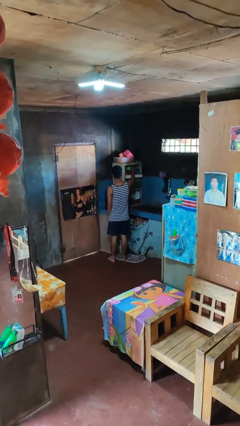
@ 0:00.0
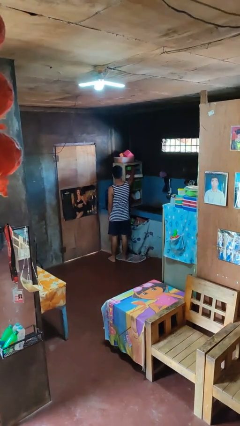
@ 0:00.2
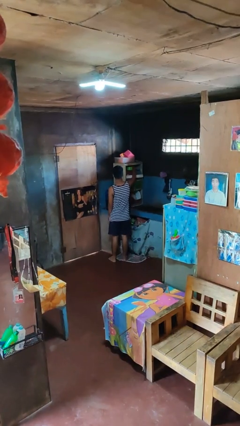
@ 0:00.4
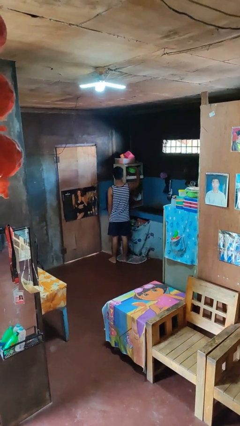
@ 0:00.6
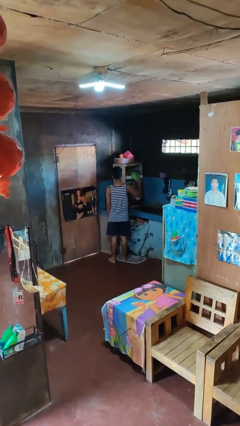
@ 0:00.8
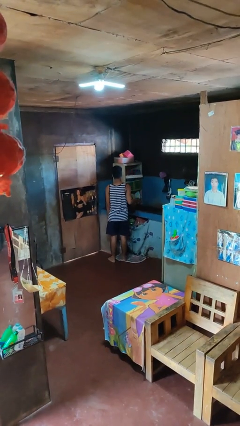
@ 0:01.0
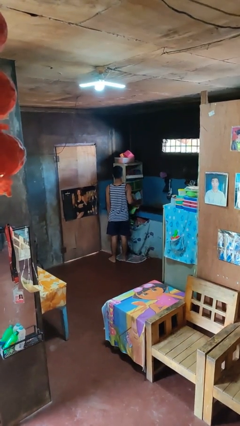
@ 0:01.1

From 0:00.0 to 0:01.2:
person takes object from cabinet

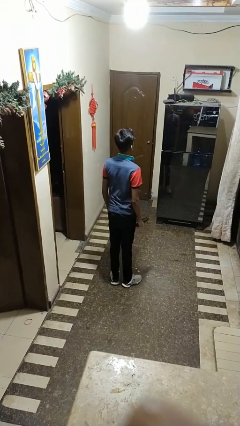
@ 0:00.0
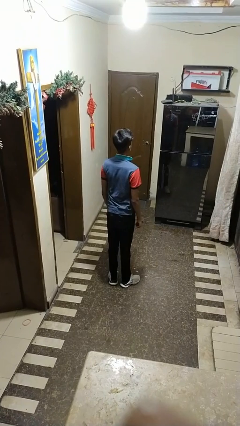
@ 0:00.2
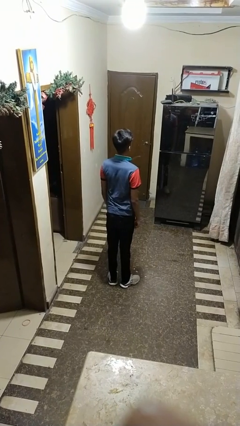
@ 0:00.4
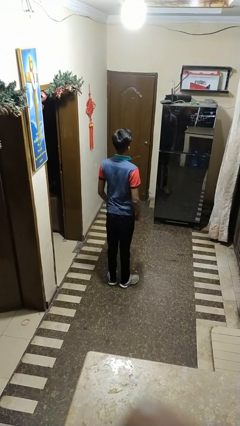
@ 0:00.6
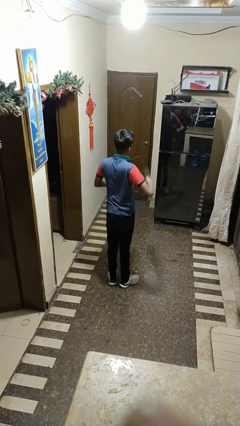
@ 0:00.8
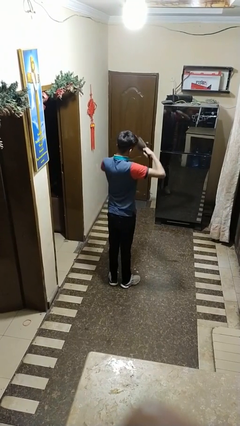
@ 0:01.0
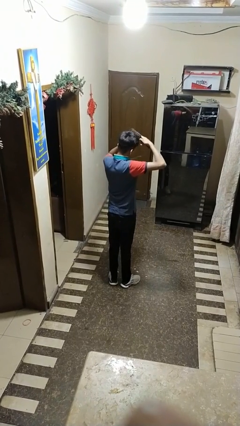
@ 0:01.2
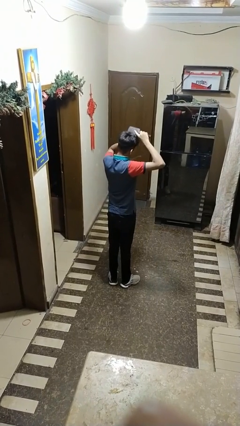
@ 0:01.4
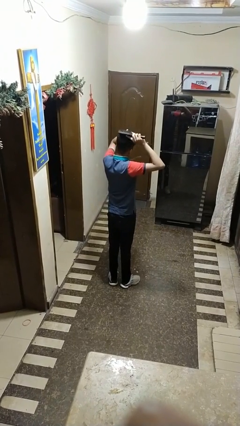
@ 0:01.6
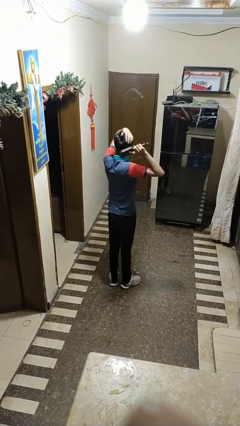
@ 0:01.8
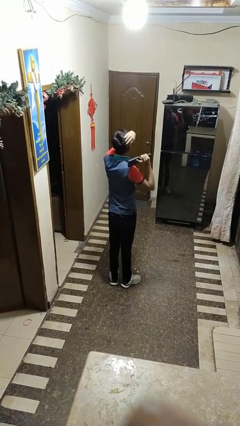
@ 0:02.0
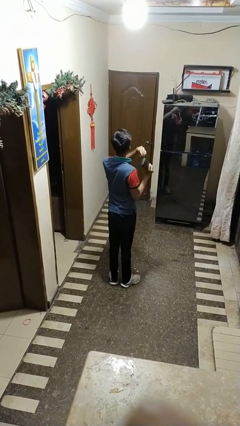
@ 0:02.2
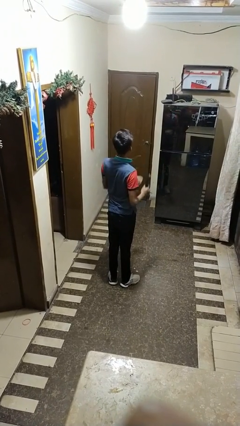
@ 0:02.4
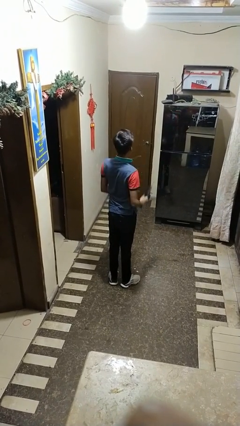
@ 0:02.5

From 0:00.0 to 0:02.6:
person brushes hair

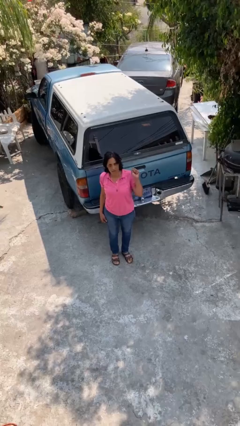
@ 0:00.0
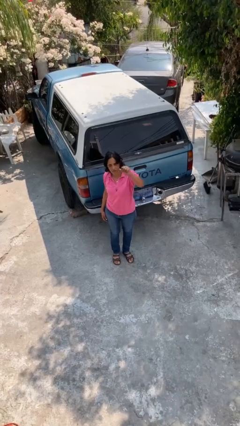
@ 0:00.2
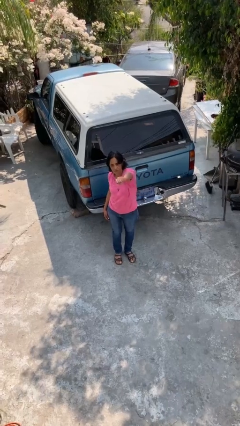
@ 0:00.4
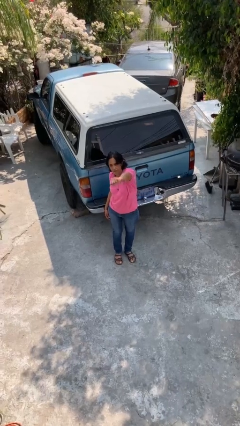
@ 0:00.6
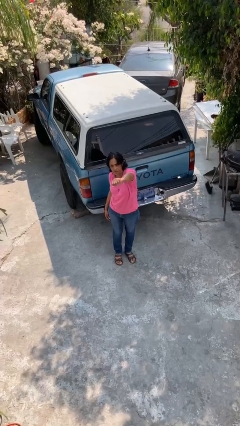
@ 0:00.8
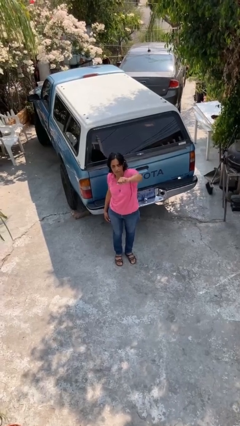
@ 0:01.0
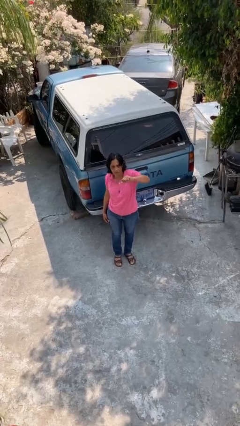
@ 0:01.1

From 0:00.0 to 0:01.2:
person karate chop

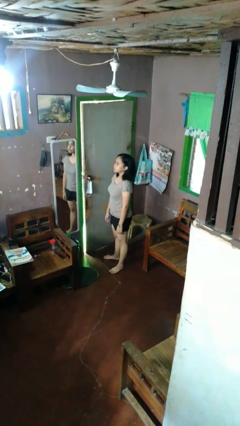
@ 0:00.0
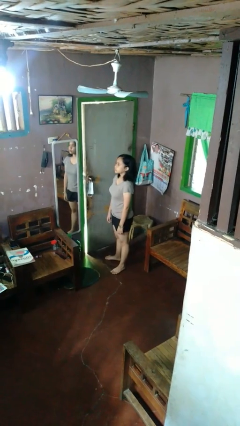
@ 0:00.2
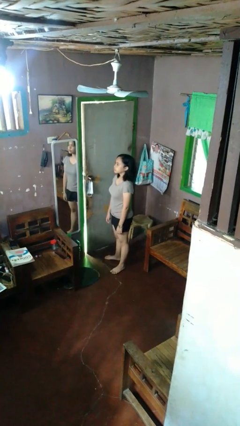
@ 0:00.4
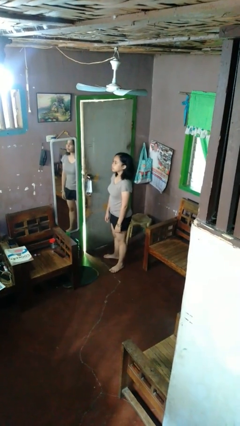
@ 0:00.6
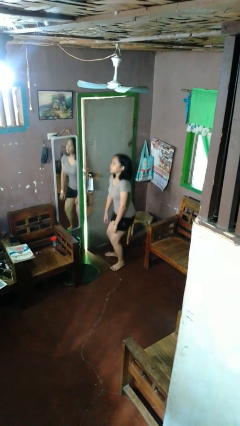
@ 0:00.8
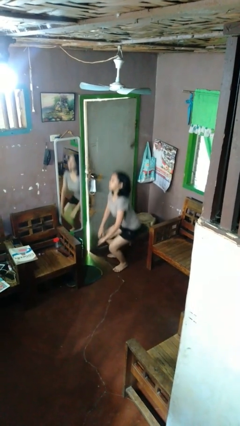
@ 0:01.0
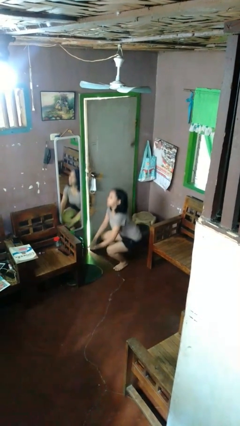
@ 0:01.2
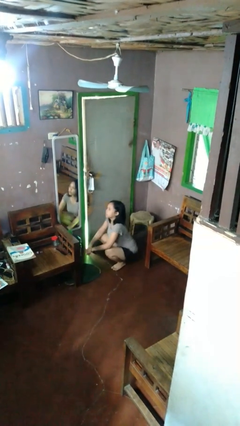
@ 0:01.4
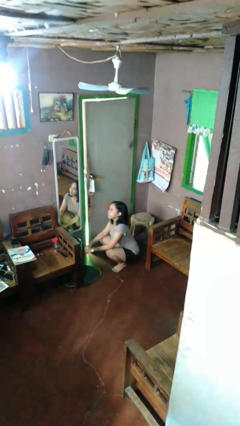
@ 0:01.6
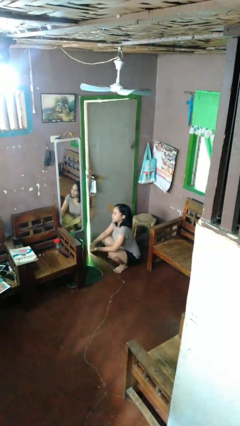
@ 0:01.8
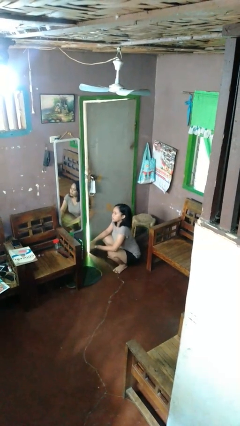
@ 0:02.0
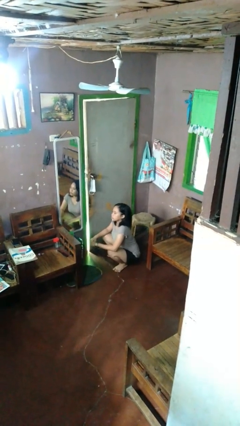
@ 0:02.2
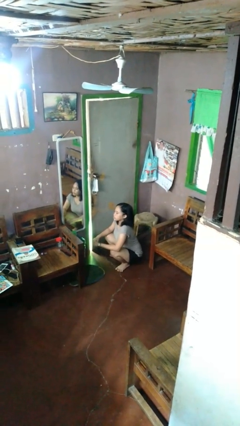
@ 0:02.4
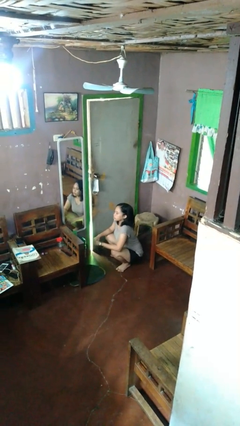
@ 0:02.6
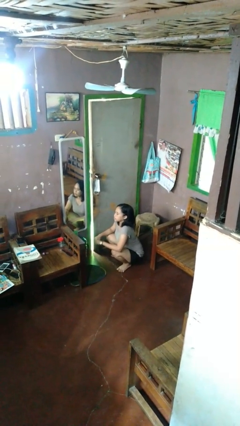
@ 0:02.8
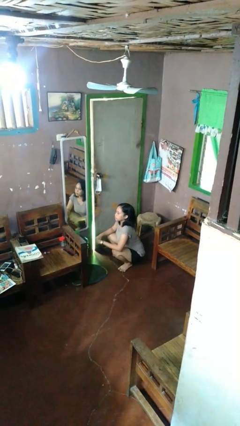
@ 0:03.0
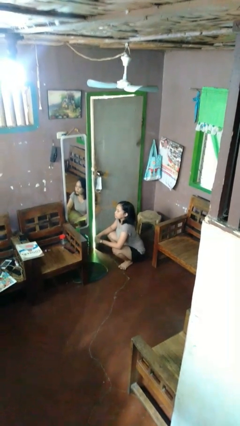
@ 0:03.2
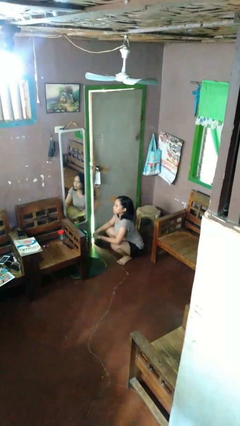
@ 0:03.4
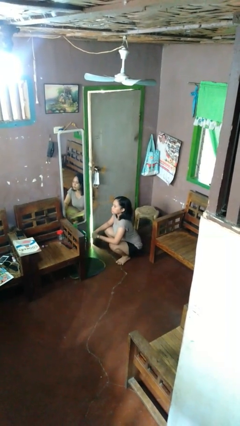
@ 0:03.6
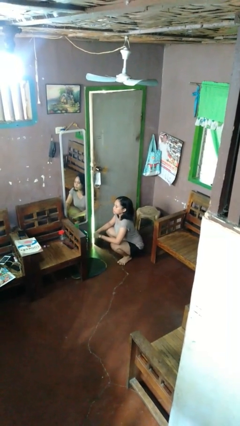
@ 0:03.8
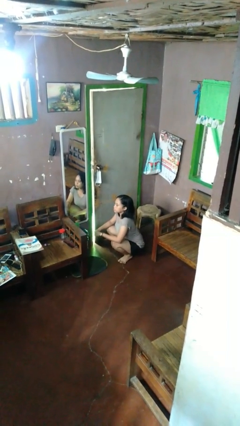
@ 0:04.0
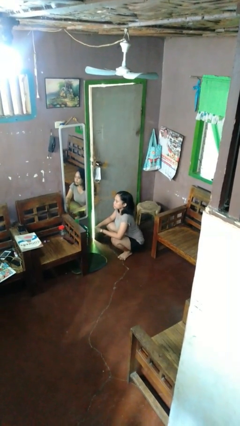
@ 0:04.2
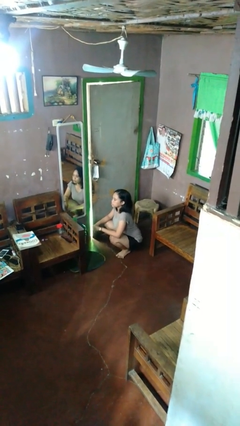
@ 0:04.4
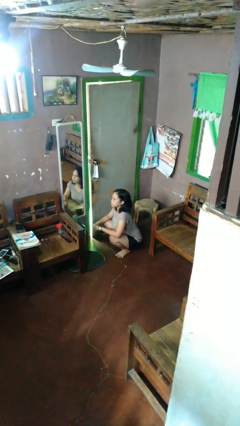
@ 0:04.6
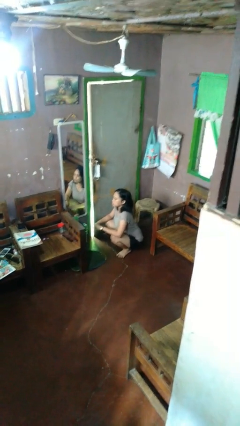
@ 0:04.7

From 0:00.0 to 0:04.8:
person squats

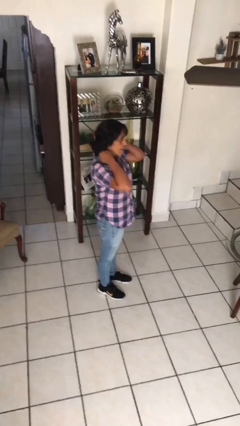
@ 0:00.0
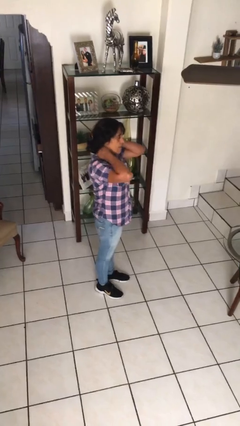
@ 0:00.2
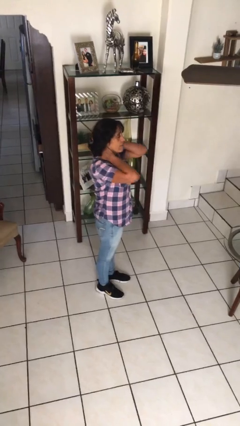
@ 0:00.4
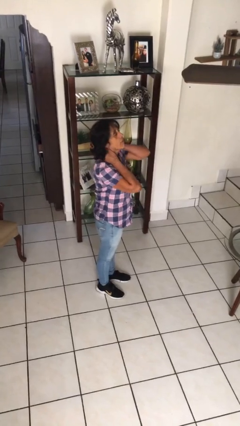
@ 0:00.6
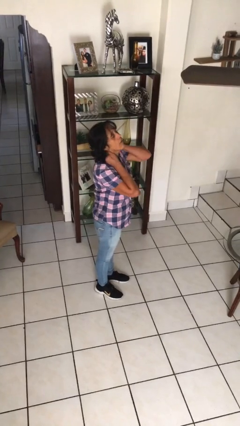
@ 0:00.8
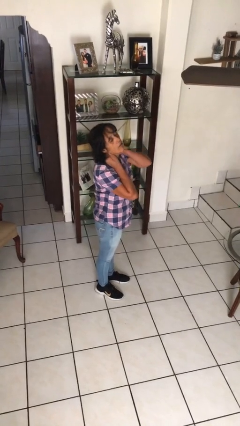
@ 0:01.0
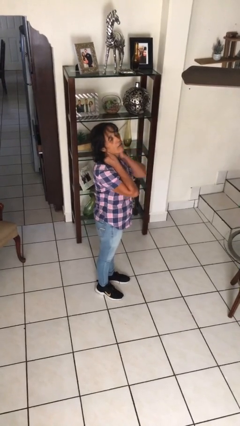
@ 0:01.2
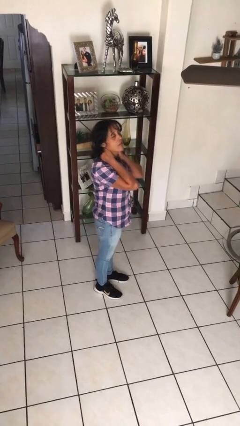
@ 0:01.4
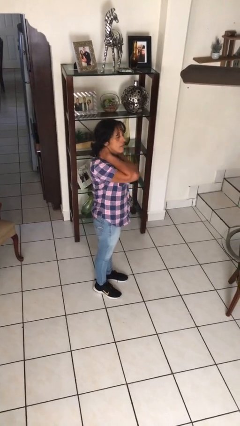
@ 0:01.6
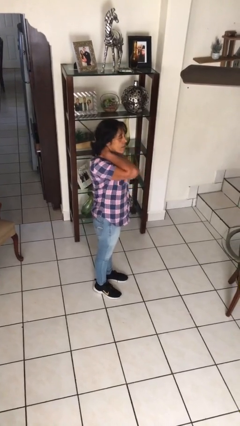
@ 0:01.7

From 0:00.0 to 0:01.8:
person rubs neck

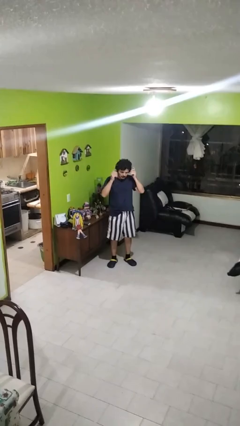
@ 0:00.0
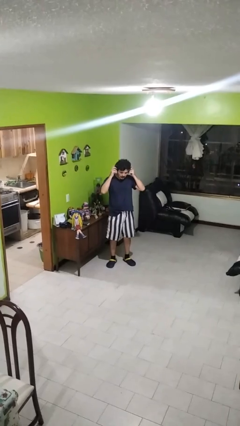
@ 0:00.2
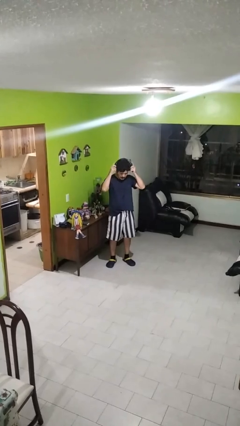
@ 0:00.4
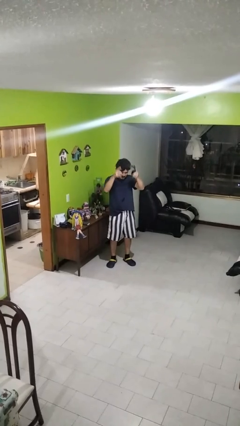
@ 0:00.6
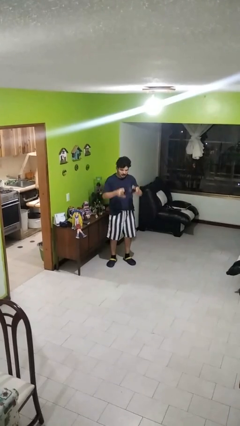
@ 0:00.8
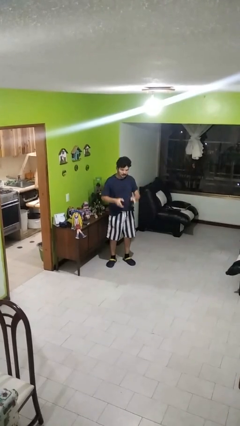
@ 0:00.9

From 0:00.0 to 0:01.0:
person takes off headphones

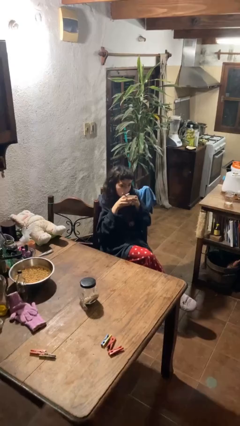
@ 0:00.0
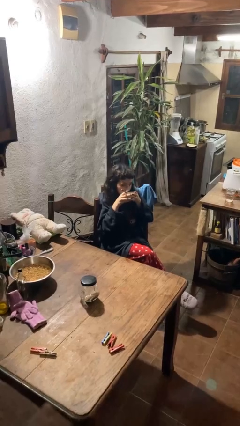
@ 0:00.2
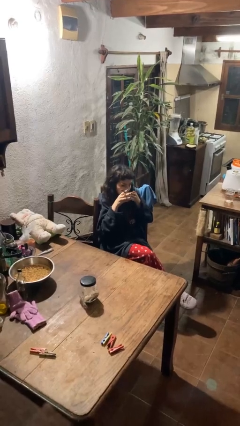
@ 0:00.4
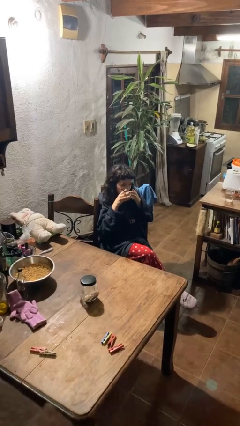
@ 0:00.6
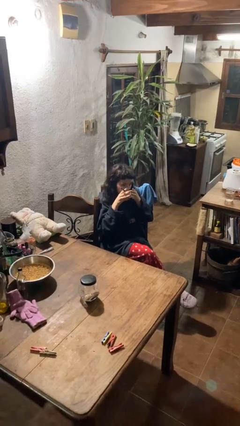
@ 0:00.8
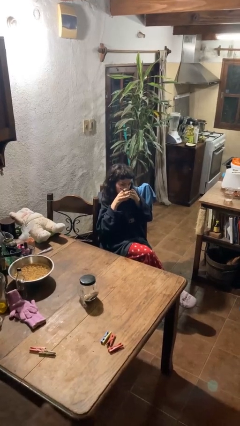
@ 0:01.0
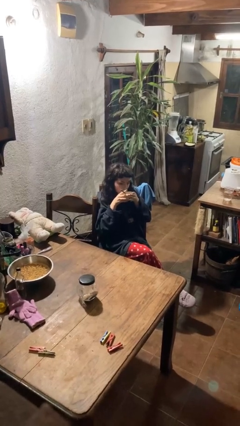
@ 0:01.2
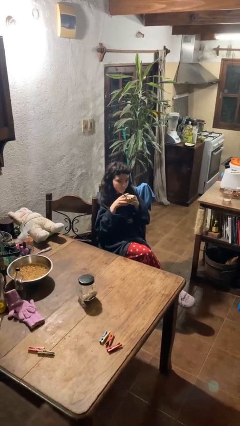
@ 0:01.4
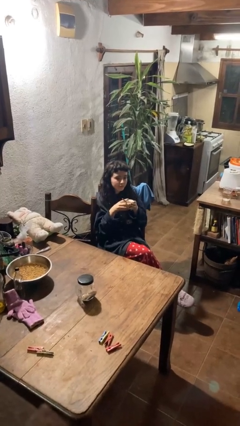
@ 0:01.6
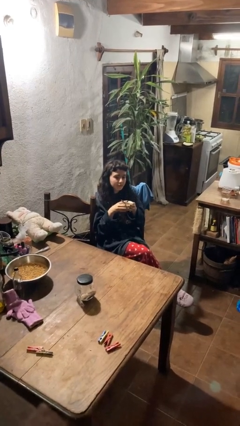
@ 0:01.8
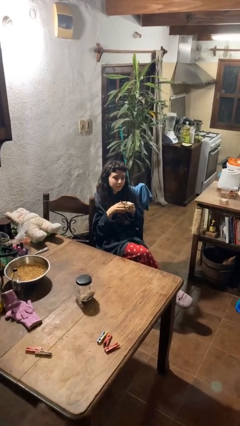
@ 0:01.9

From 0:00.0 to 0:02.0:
person drinks from mug

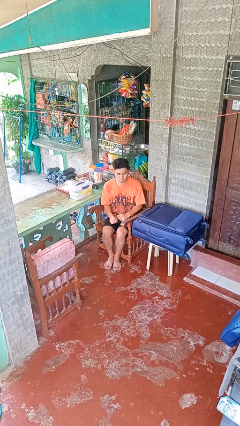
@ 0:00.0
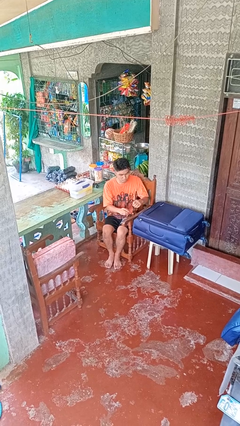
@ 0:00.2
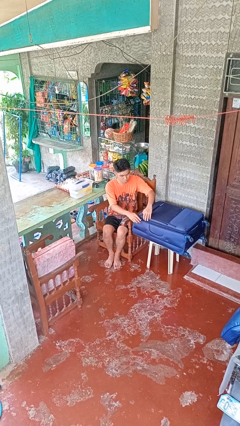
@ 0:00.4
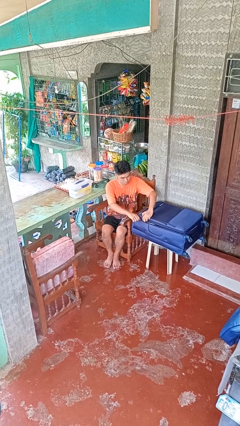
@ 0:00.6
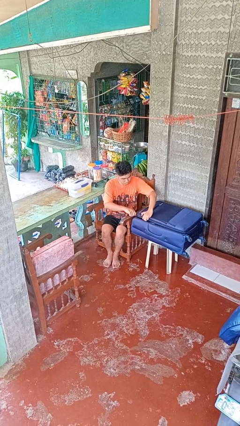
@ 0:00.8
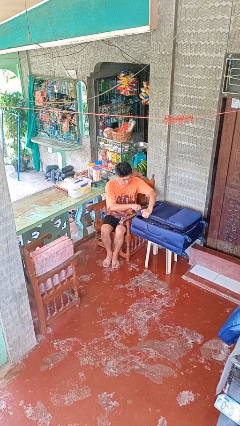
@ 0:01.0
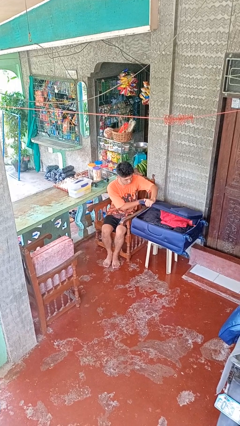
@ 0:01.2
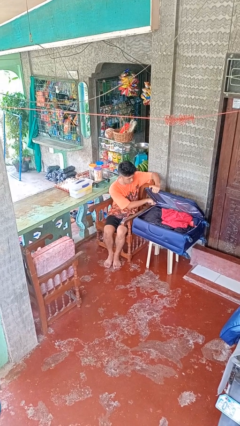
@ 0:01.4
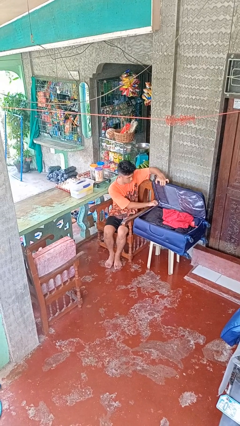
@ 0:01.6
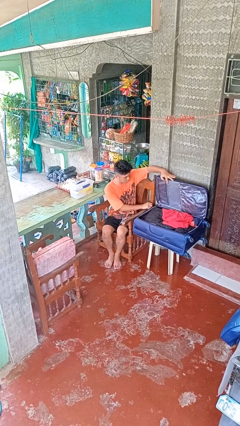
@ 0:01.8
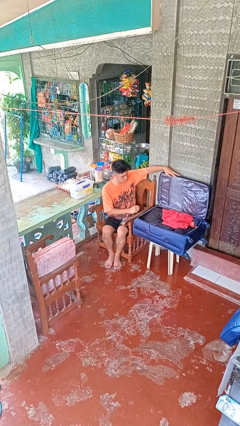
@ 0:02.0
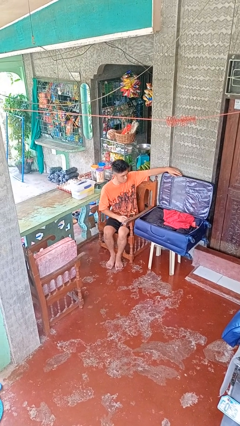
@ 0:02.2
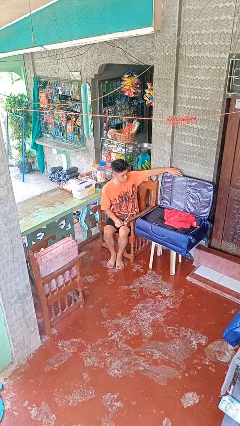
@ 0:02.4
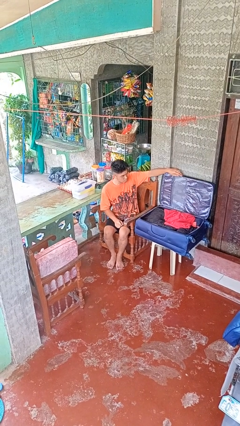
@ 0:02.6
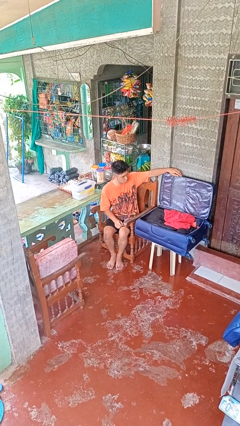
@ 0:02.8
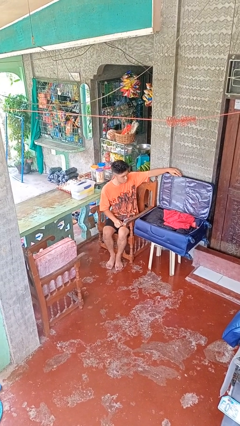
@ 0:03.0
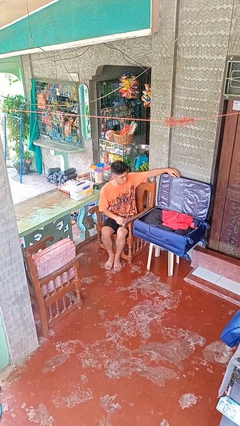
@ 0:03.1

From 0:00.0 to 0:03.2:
person opens suitcase
